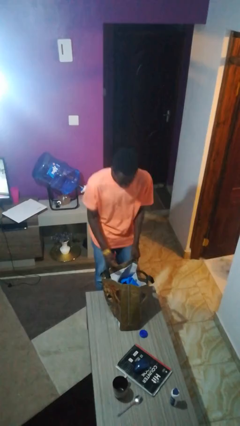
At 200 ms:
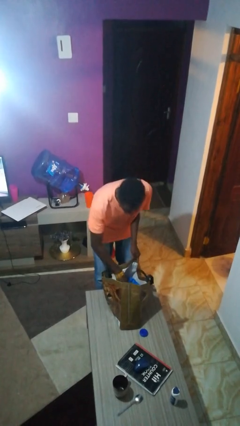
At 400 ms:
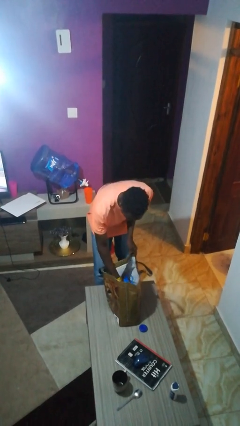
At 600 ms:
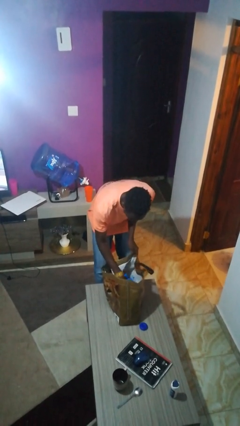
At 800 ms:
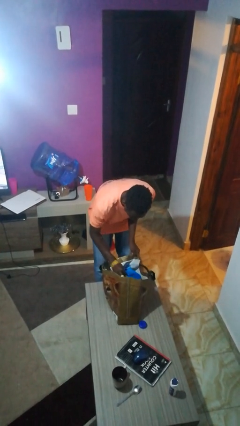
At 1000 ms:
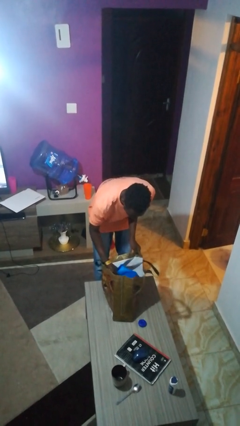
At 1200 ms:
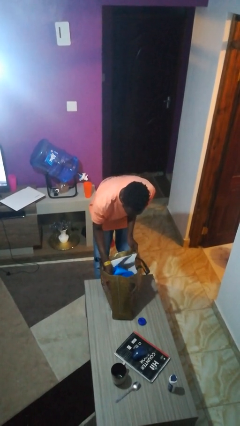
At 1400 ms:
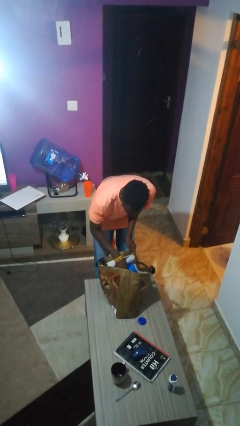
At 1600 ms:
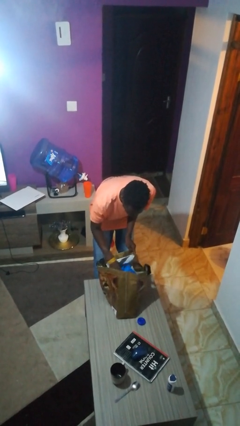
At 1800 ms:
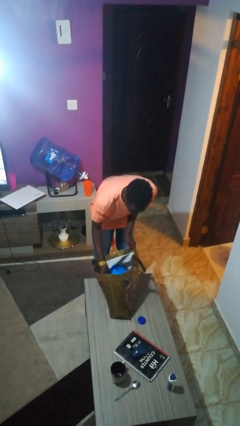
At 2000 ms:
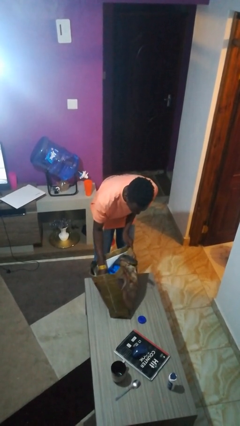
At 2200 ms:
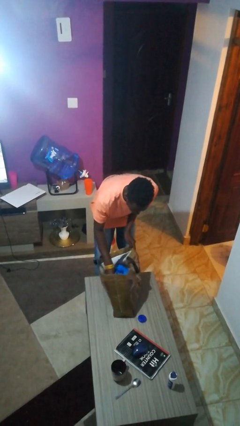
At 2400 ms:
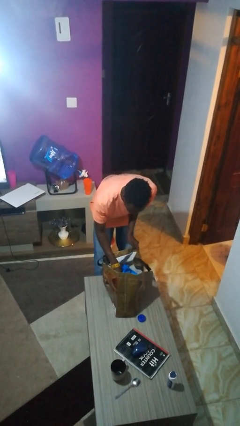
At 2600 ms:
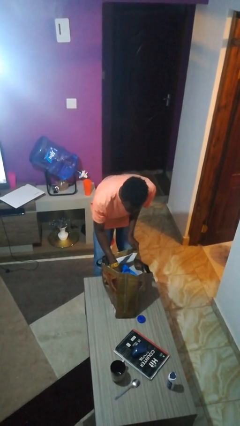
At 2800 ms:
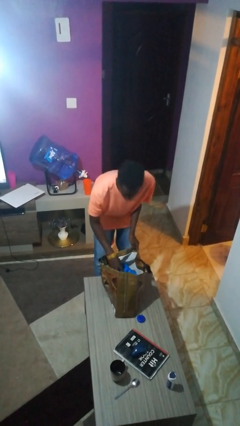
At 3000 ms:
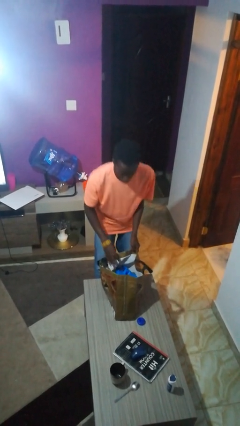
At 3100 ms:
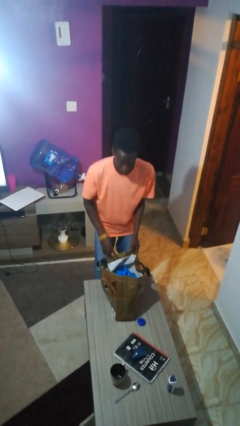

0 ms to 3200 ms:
person searches in bag

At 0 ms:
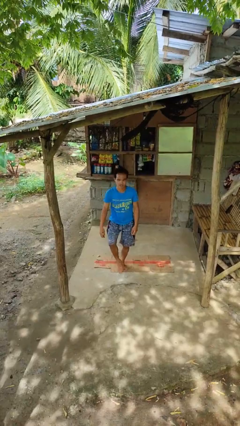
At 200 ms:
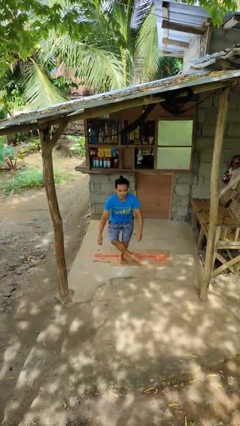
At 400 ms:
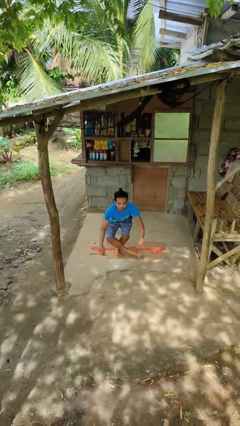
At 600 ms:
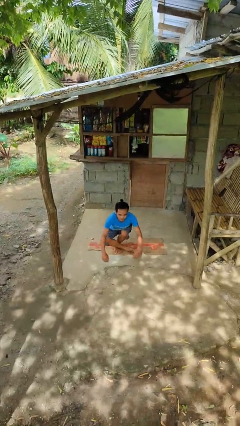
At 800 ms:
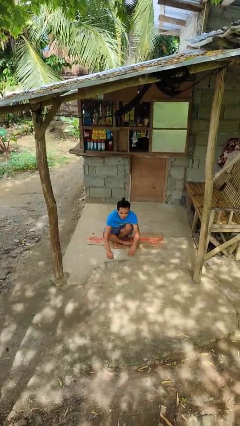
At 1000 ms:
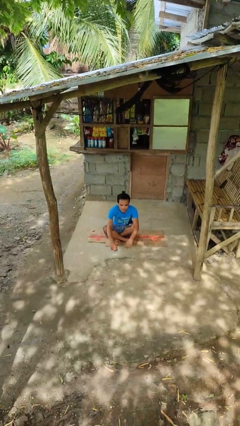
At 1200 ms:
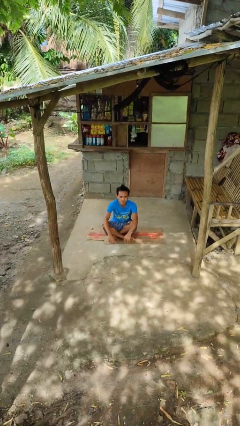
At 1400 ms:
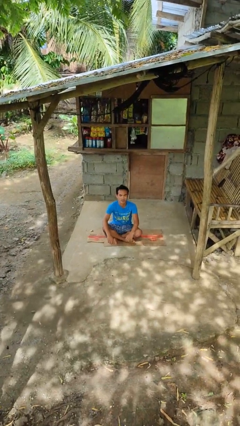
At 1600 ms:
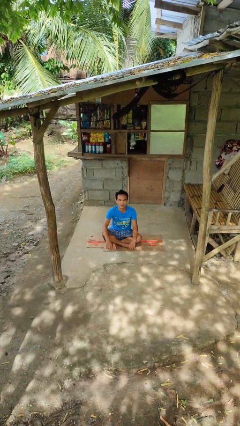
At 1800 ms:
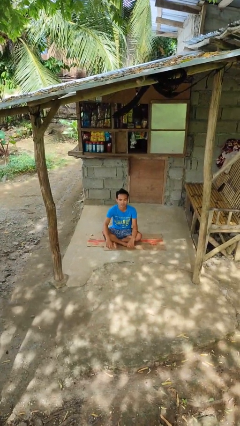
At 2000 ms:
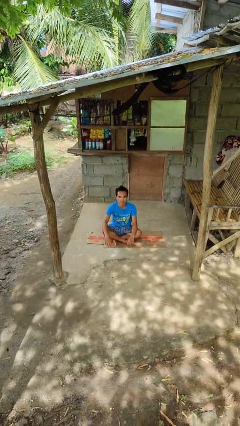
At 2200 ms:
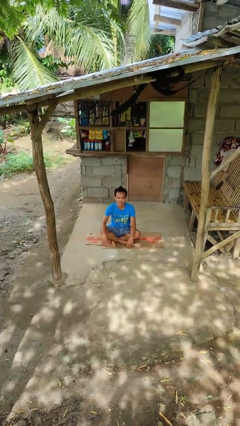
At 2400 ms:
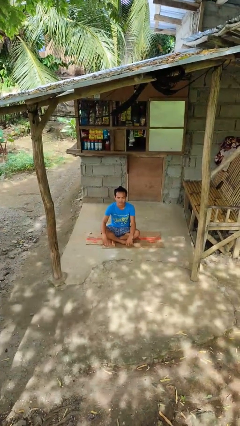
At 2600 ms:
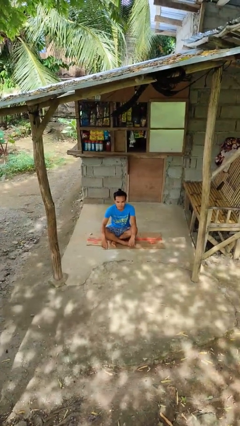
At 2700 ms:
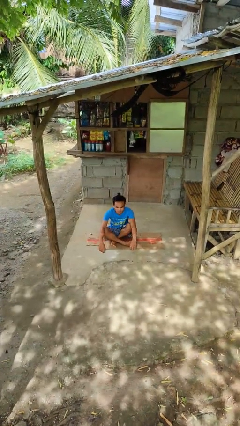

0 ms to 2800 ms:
person sits crisscross

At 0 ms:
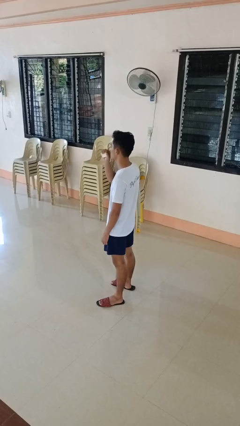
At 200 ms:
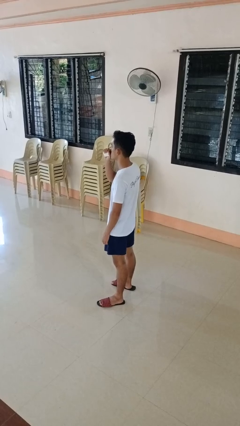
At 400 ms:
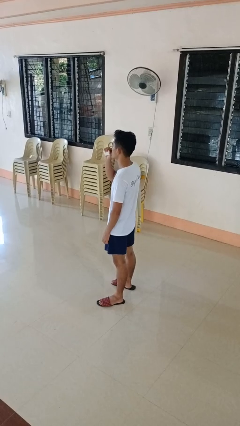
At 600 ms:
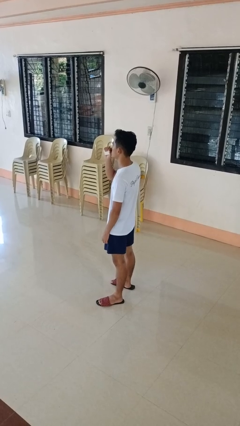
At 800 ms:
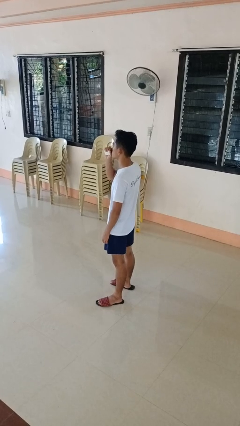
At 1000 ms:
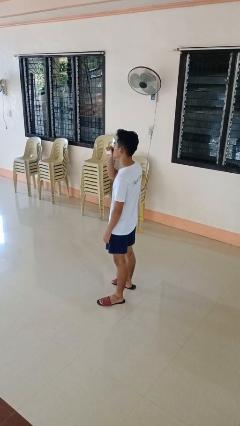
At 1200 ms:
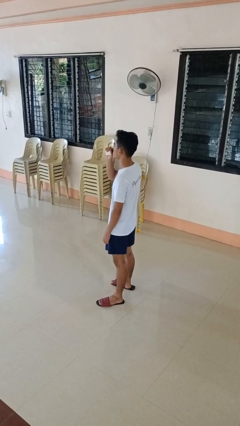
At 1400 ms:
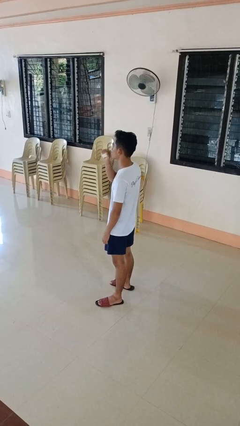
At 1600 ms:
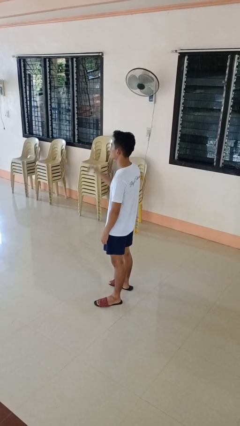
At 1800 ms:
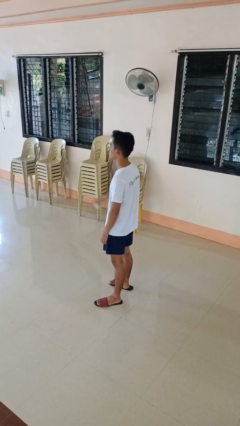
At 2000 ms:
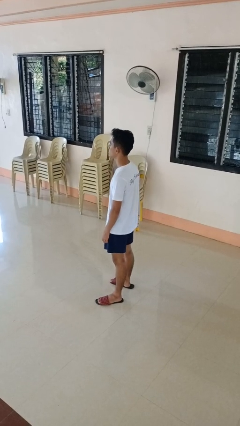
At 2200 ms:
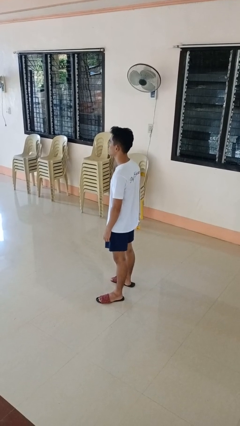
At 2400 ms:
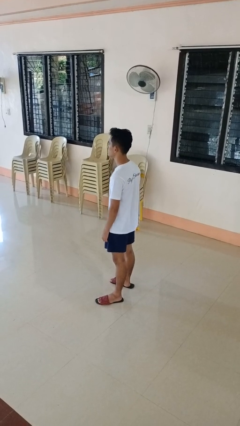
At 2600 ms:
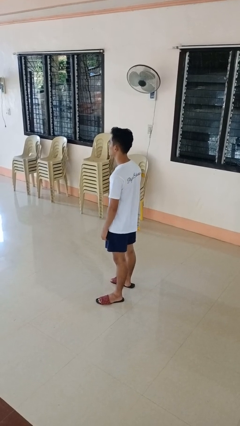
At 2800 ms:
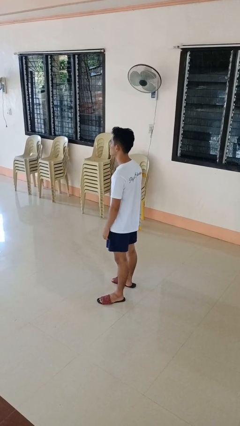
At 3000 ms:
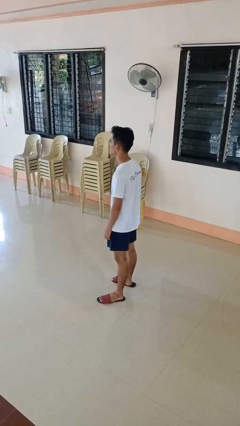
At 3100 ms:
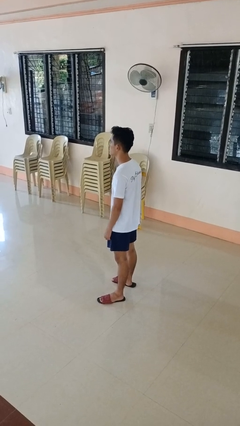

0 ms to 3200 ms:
person vapes

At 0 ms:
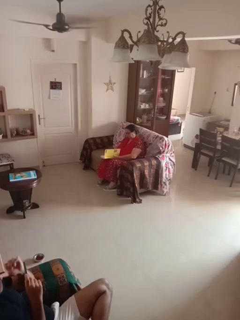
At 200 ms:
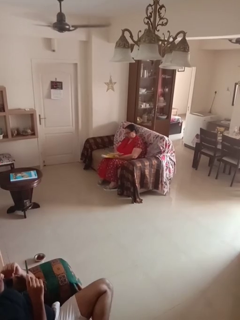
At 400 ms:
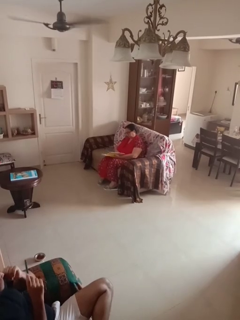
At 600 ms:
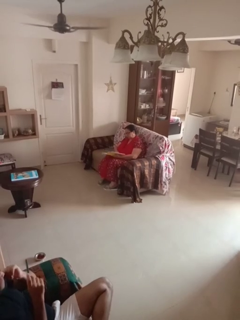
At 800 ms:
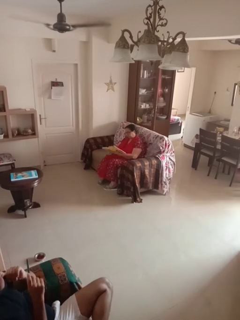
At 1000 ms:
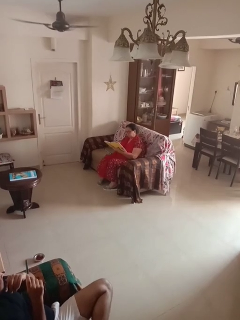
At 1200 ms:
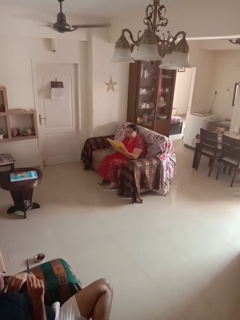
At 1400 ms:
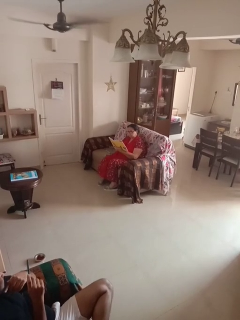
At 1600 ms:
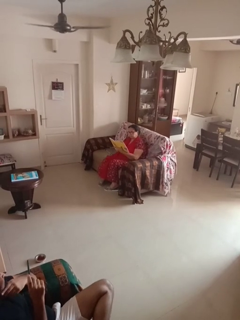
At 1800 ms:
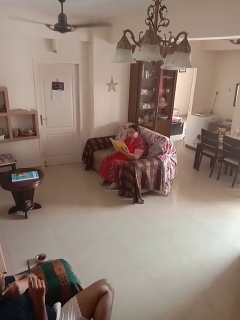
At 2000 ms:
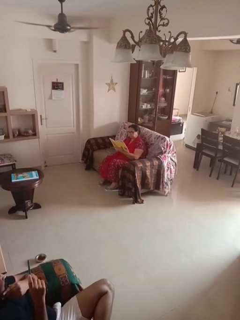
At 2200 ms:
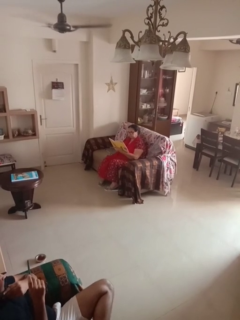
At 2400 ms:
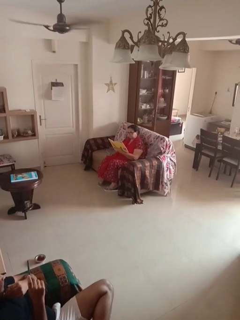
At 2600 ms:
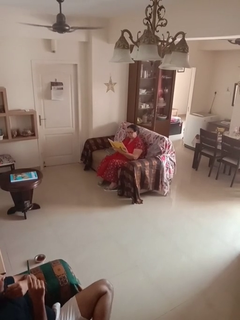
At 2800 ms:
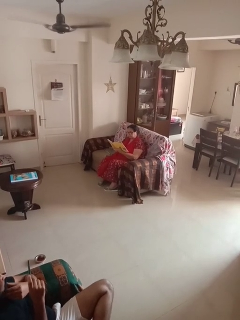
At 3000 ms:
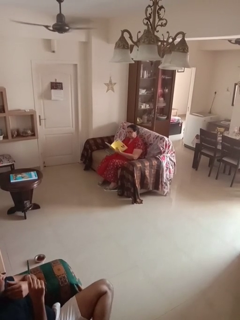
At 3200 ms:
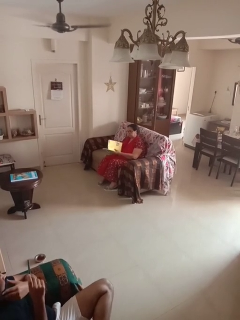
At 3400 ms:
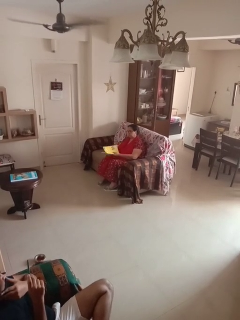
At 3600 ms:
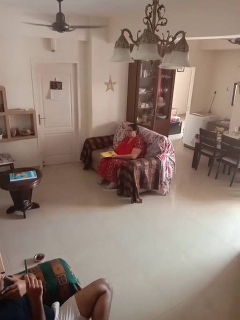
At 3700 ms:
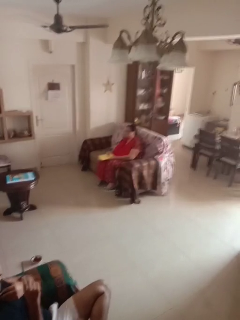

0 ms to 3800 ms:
person reads document

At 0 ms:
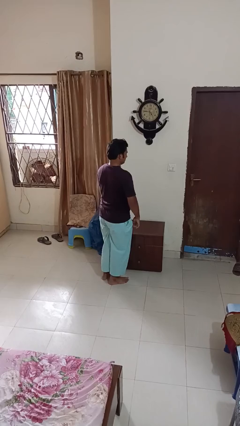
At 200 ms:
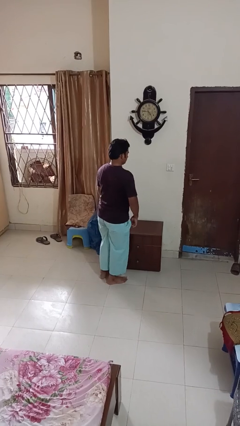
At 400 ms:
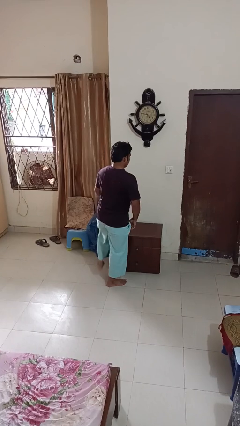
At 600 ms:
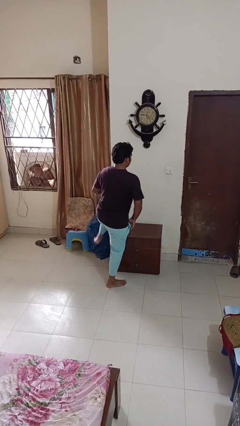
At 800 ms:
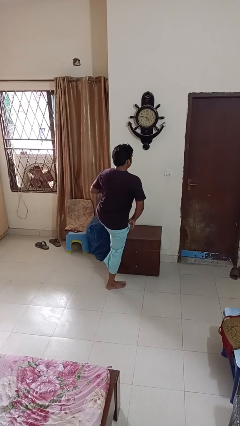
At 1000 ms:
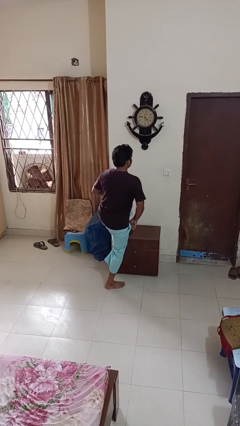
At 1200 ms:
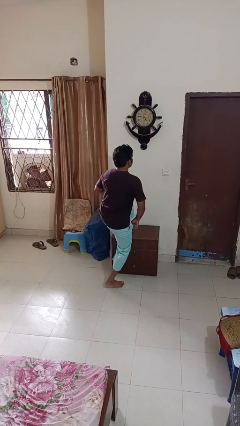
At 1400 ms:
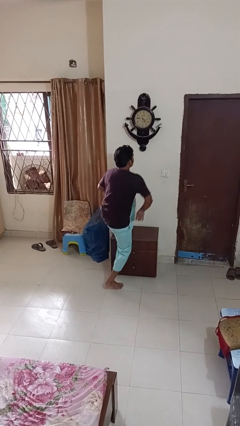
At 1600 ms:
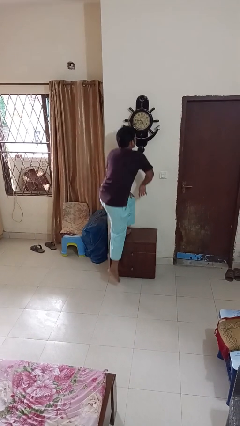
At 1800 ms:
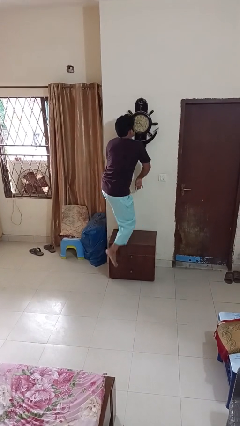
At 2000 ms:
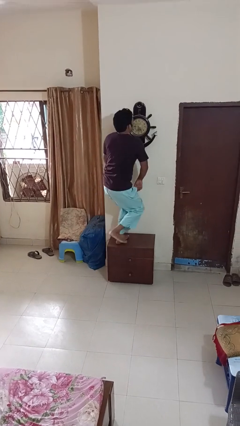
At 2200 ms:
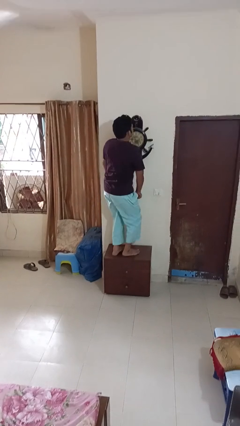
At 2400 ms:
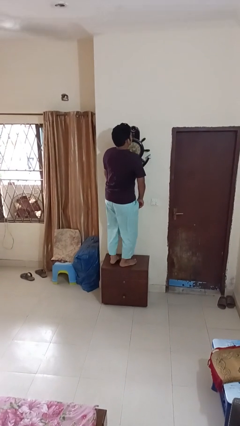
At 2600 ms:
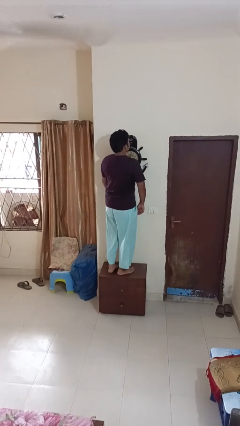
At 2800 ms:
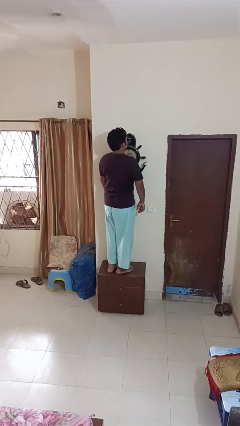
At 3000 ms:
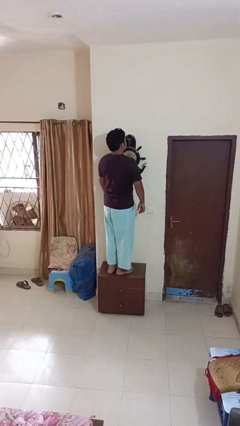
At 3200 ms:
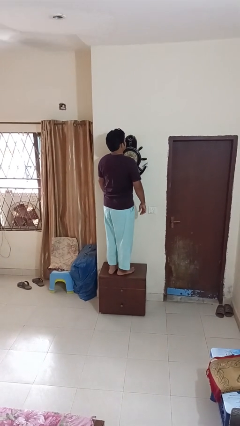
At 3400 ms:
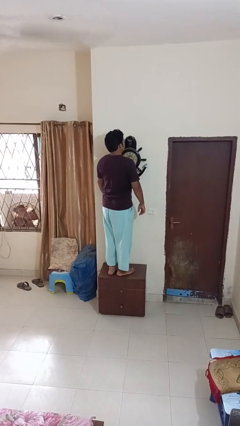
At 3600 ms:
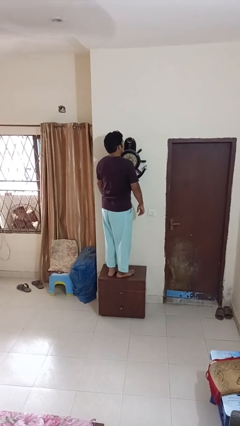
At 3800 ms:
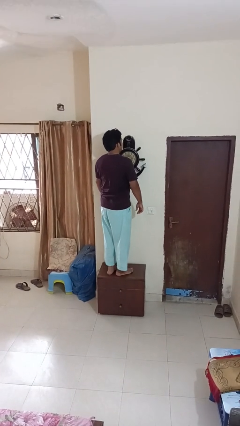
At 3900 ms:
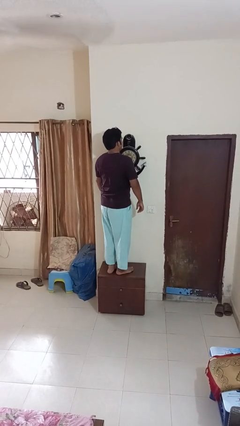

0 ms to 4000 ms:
person climbs on table

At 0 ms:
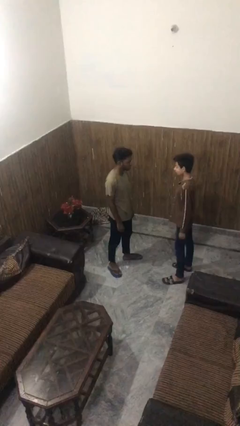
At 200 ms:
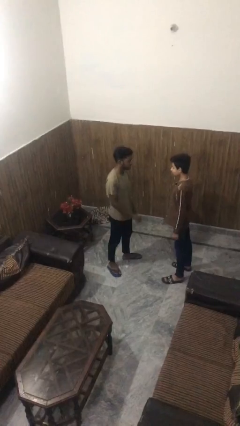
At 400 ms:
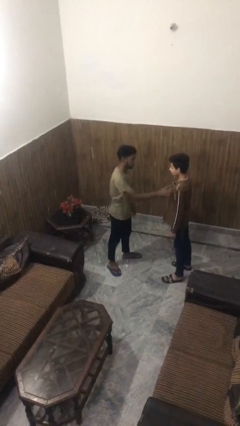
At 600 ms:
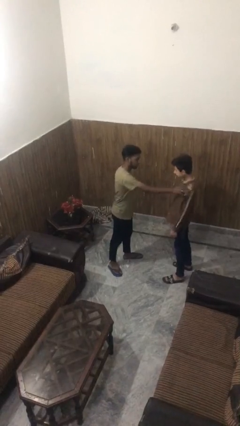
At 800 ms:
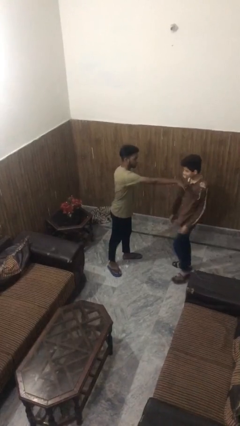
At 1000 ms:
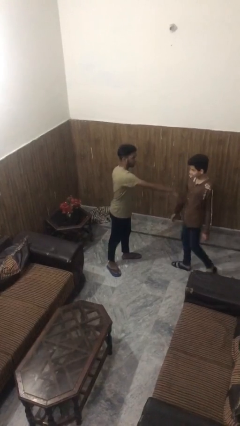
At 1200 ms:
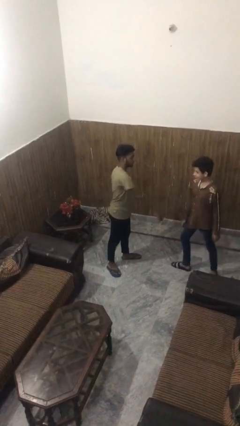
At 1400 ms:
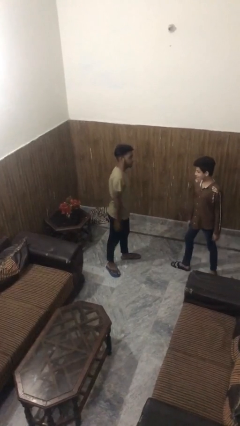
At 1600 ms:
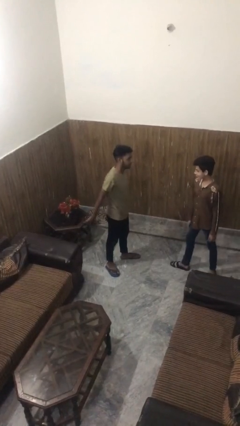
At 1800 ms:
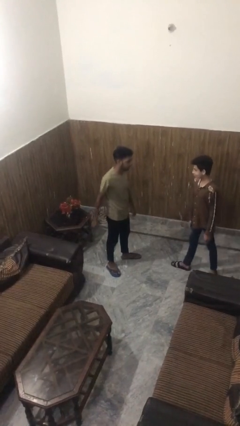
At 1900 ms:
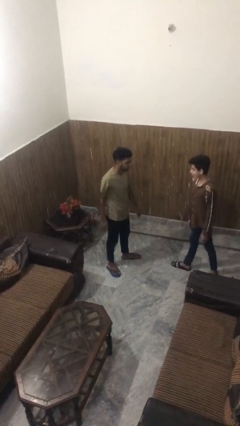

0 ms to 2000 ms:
person shoves person
